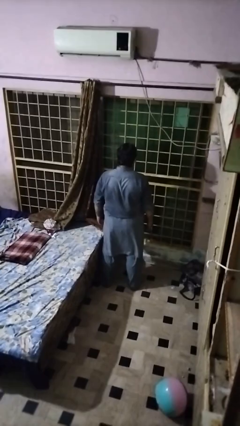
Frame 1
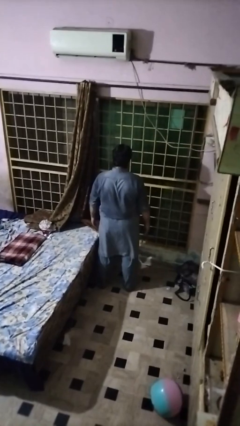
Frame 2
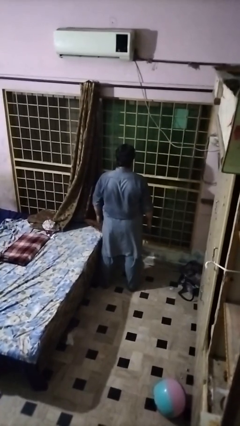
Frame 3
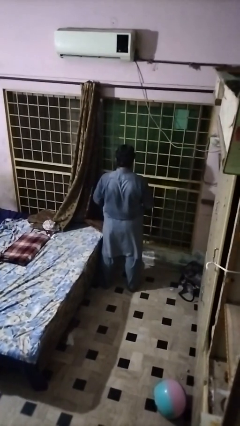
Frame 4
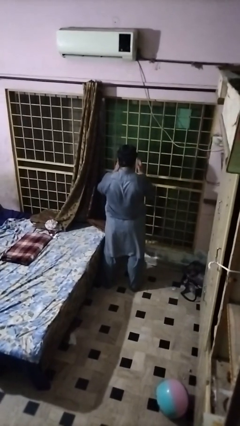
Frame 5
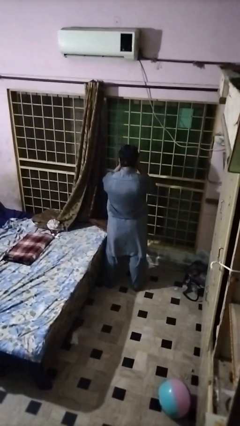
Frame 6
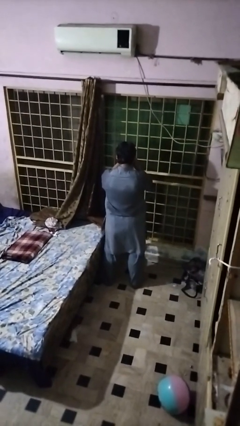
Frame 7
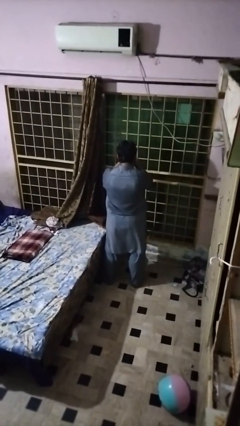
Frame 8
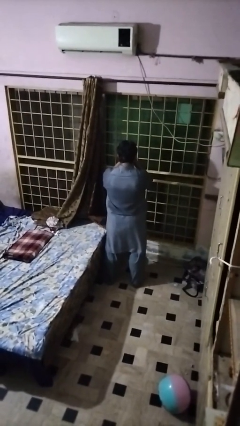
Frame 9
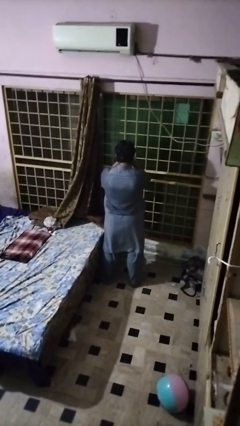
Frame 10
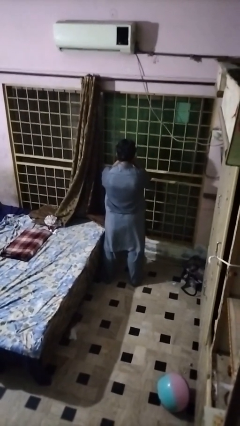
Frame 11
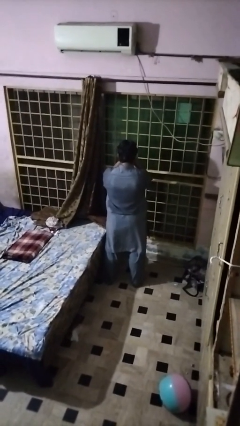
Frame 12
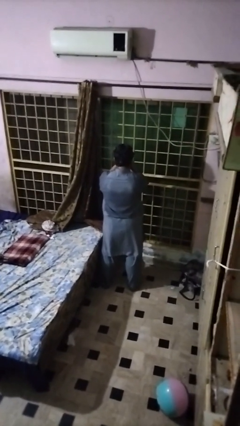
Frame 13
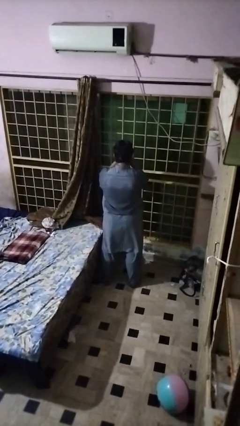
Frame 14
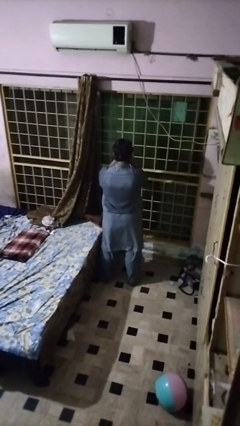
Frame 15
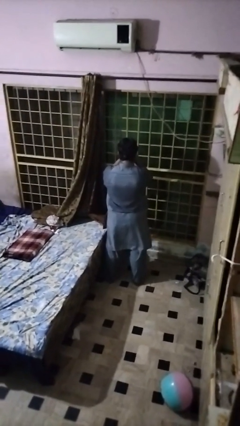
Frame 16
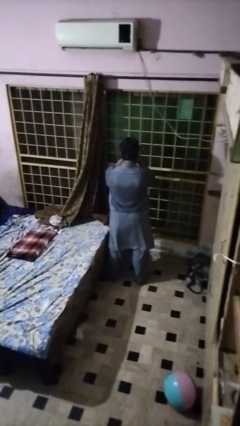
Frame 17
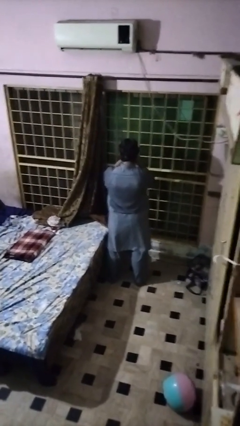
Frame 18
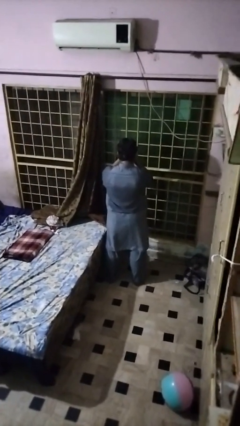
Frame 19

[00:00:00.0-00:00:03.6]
person covers face with hands

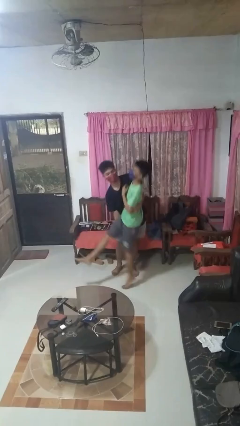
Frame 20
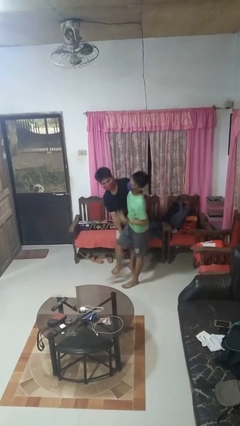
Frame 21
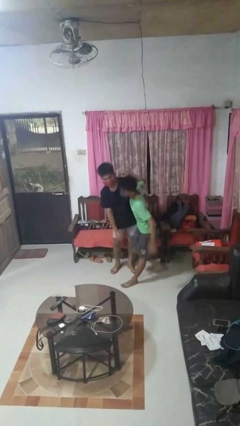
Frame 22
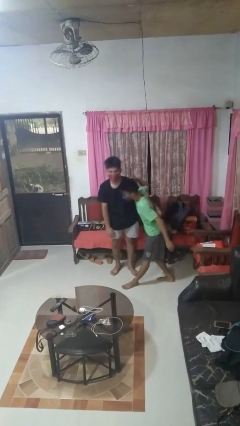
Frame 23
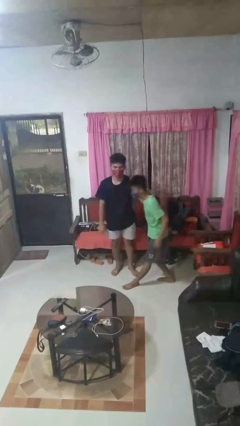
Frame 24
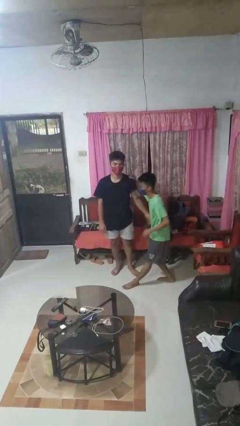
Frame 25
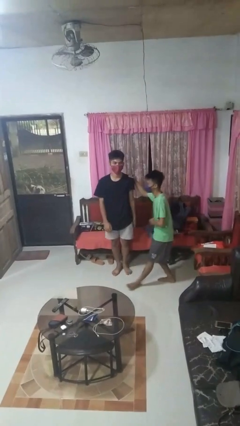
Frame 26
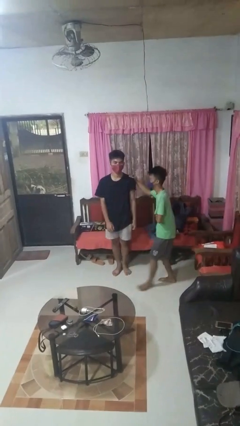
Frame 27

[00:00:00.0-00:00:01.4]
person puts down person

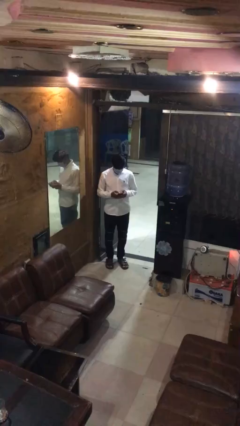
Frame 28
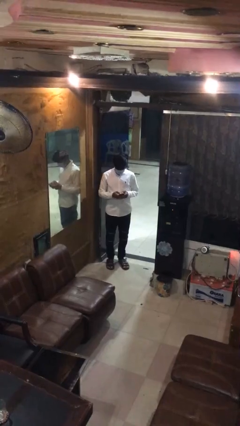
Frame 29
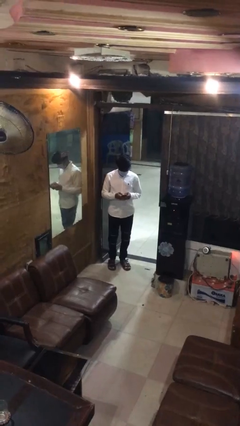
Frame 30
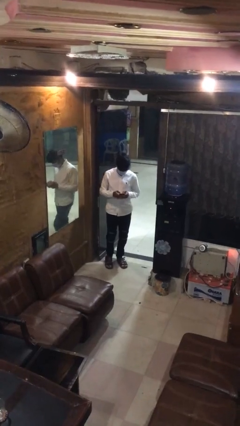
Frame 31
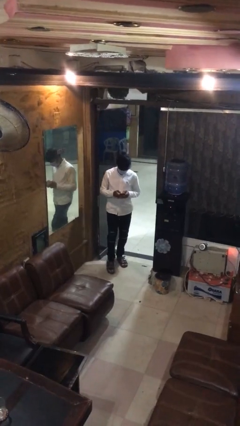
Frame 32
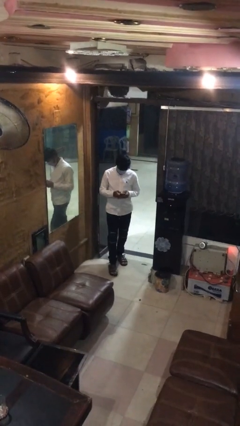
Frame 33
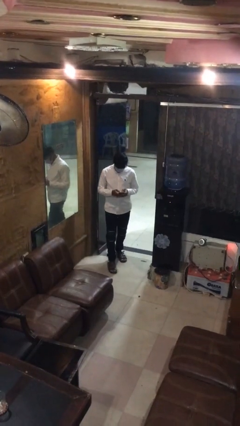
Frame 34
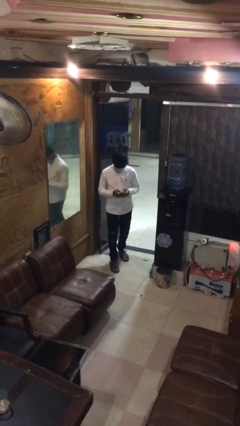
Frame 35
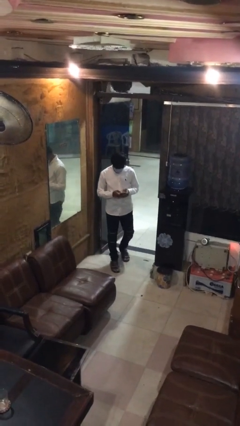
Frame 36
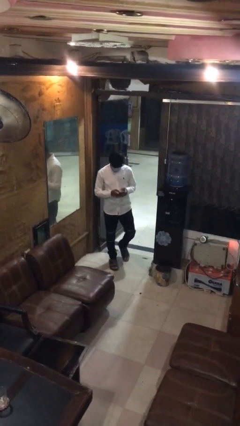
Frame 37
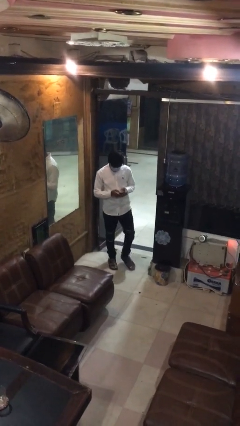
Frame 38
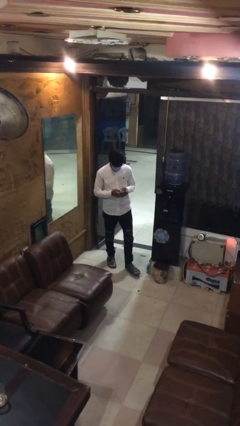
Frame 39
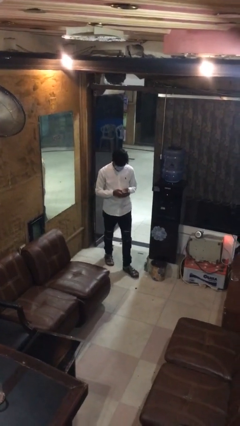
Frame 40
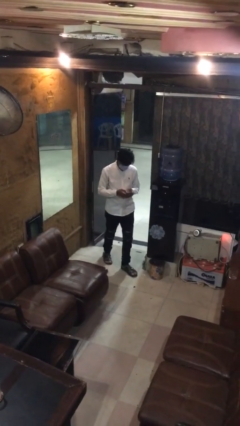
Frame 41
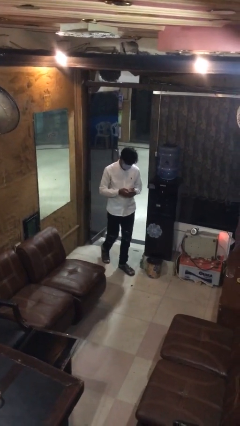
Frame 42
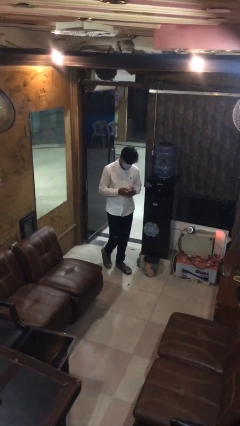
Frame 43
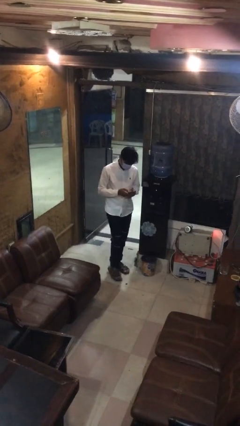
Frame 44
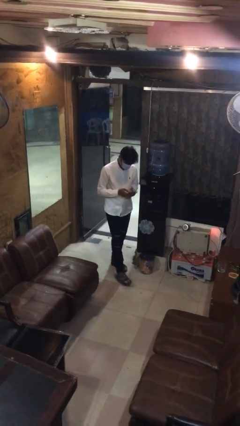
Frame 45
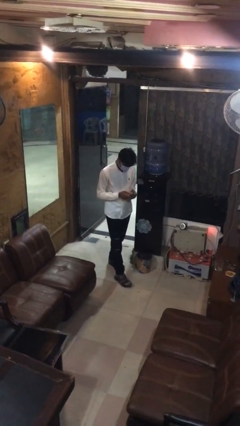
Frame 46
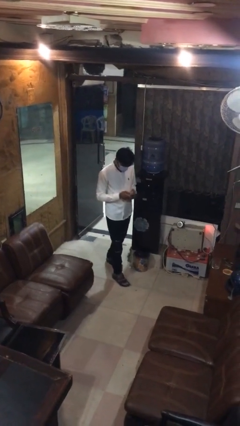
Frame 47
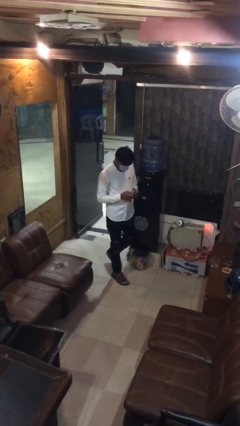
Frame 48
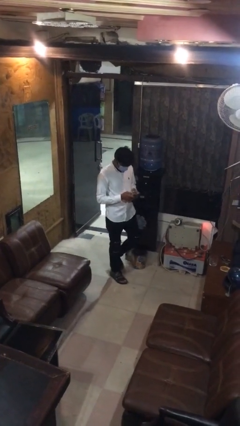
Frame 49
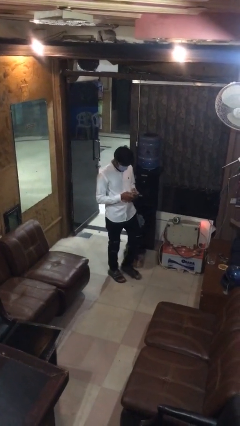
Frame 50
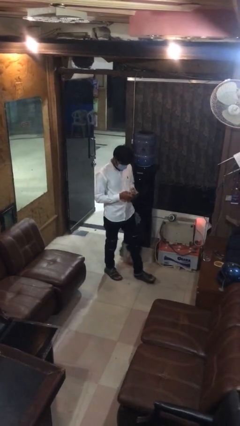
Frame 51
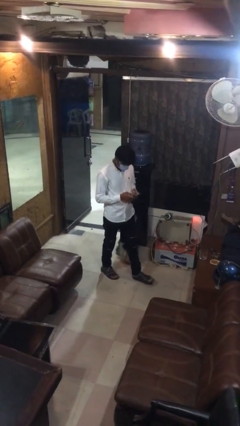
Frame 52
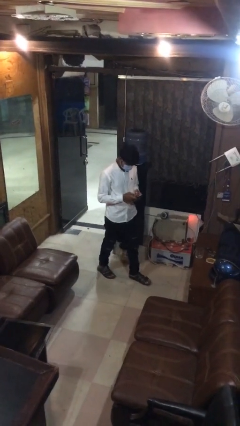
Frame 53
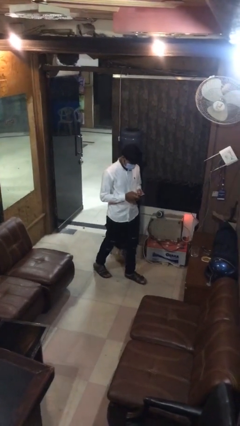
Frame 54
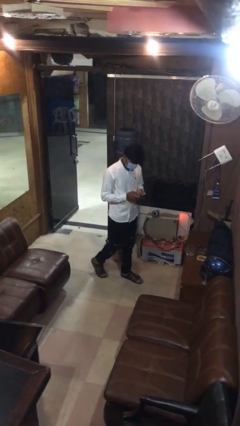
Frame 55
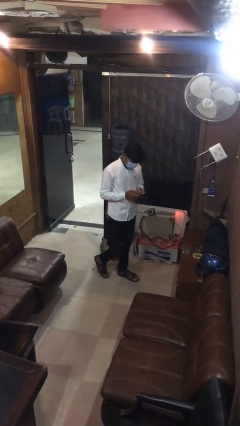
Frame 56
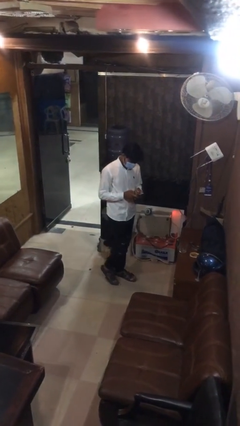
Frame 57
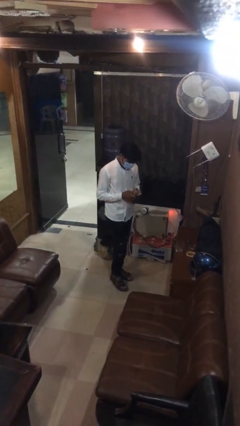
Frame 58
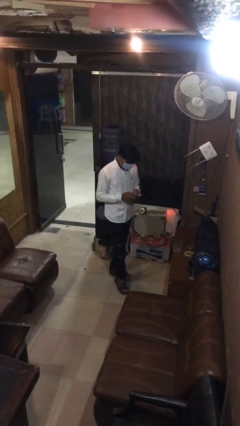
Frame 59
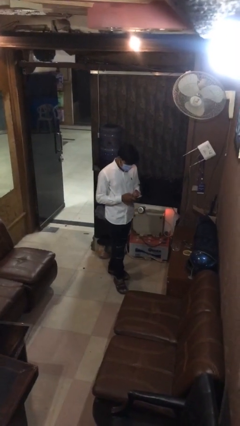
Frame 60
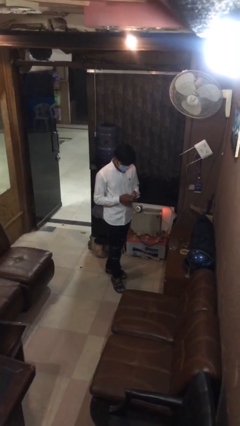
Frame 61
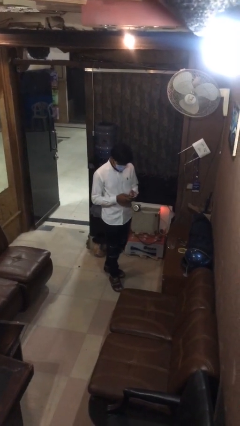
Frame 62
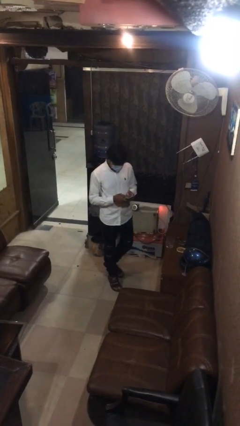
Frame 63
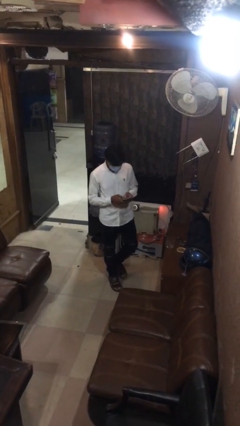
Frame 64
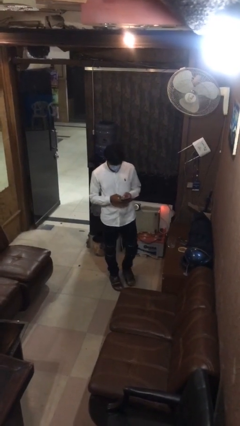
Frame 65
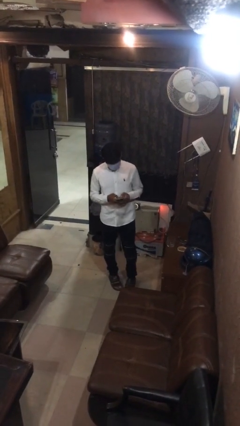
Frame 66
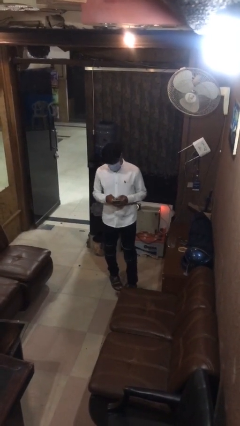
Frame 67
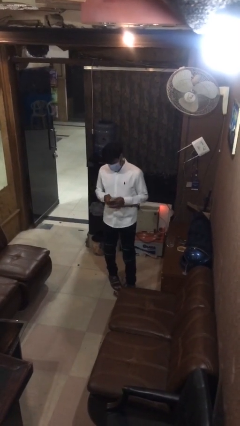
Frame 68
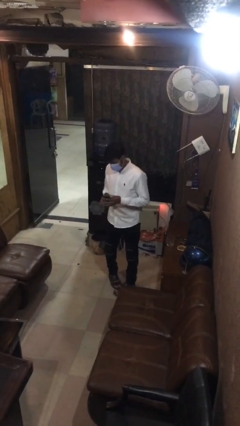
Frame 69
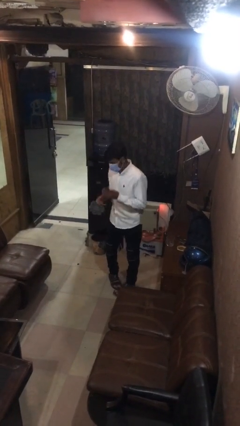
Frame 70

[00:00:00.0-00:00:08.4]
person texts on phone

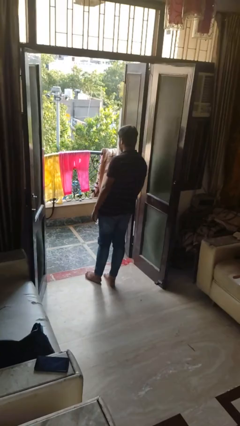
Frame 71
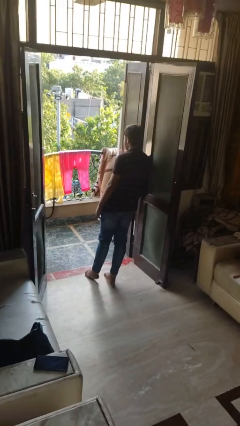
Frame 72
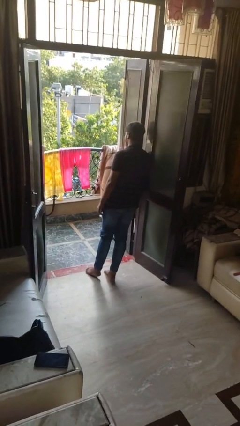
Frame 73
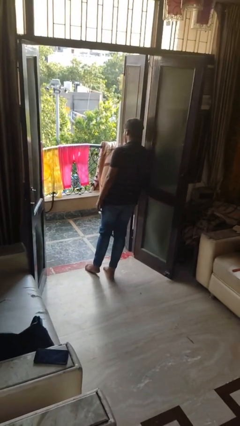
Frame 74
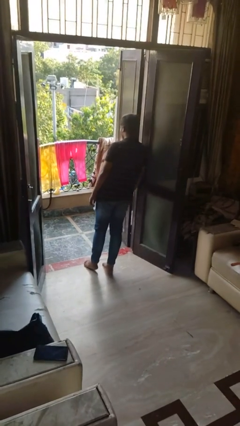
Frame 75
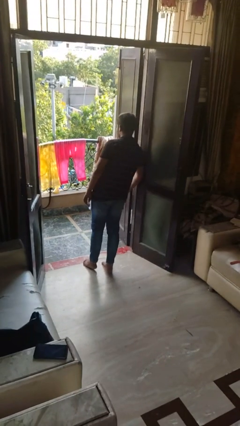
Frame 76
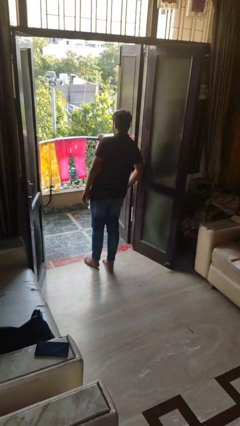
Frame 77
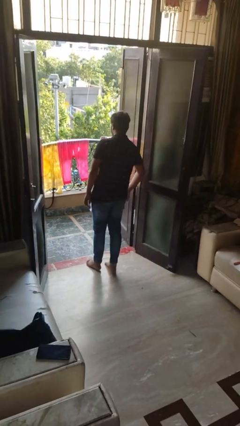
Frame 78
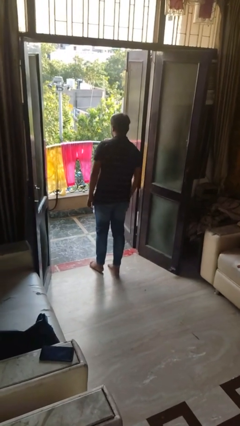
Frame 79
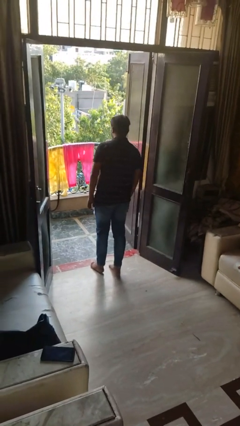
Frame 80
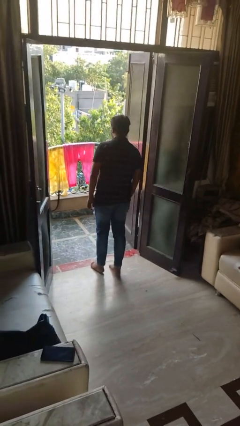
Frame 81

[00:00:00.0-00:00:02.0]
person bumps into wall

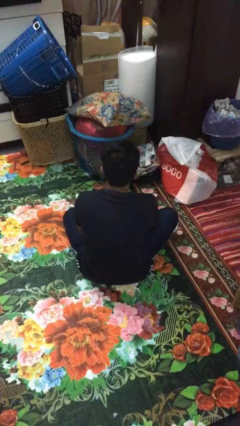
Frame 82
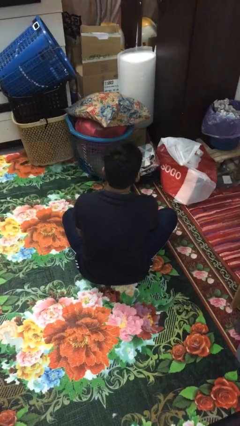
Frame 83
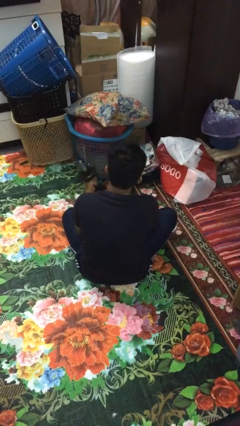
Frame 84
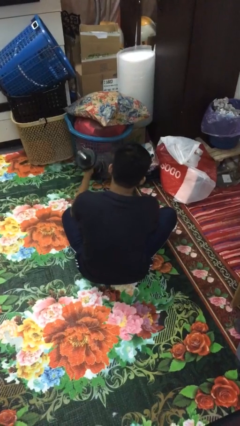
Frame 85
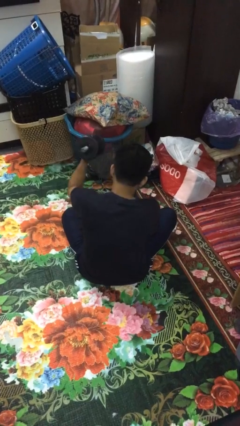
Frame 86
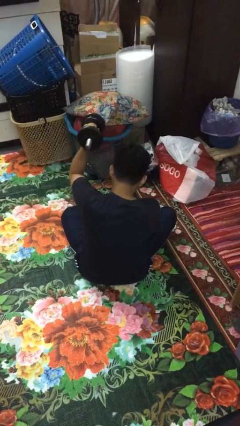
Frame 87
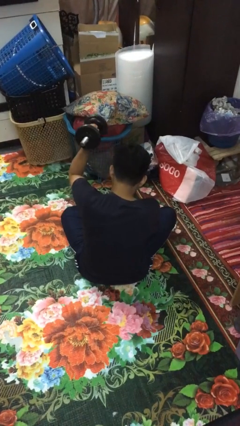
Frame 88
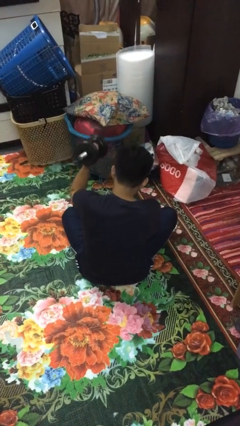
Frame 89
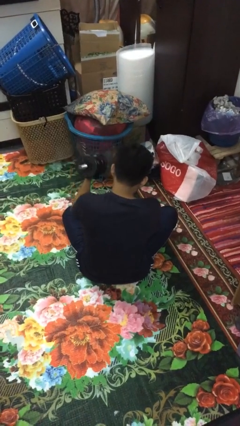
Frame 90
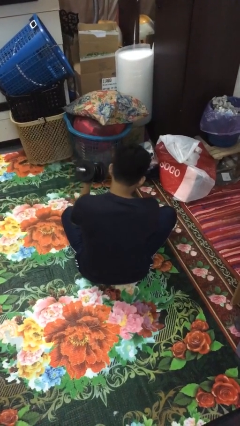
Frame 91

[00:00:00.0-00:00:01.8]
person lifts dumbbells

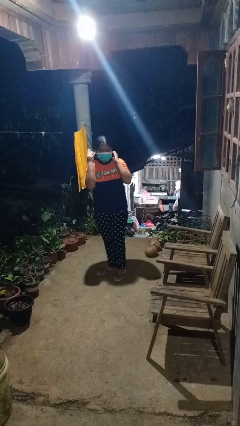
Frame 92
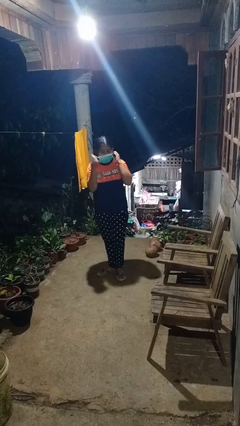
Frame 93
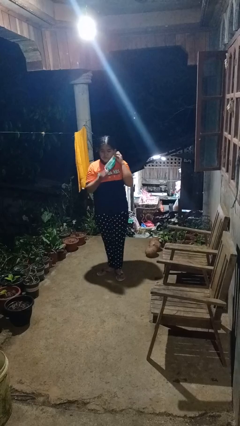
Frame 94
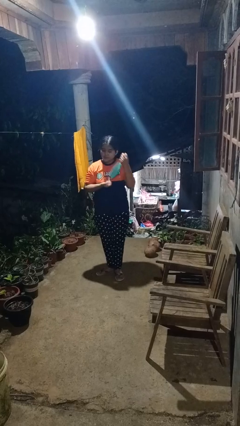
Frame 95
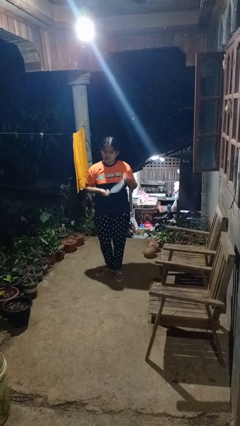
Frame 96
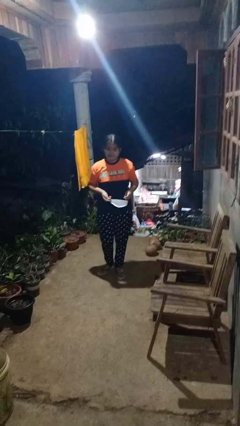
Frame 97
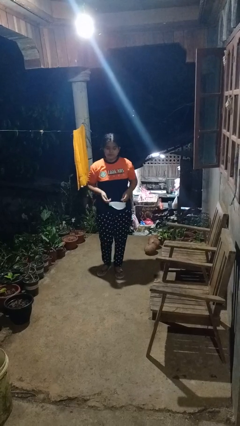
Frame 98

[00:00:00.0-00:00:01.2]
person takes off facemask
